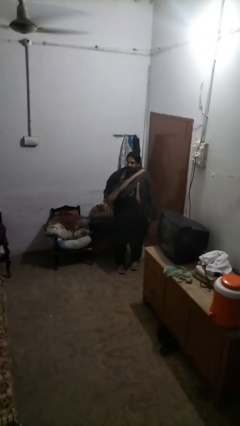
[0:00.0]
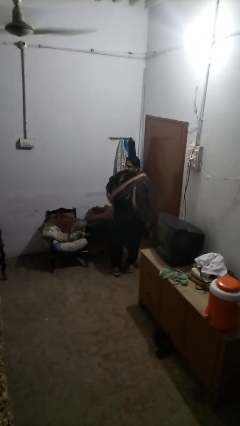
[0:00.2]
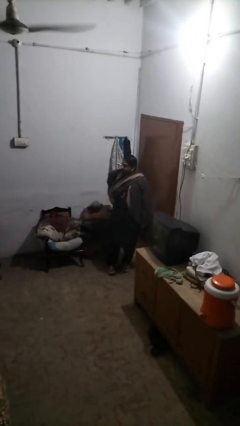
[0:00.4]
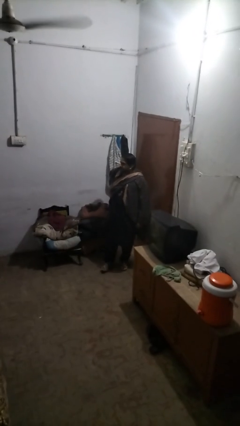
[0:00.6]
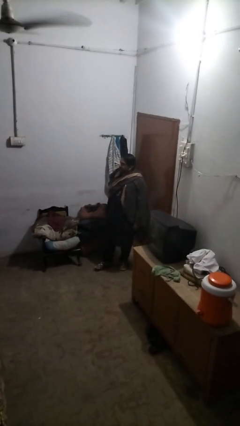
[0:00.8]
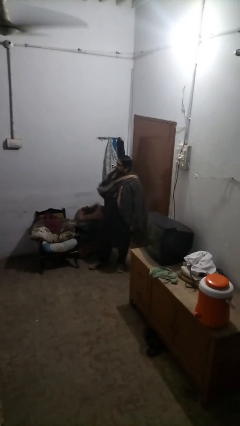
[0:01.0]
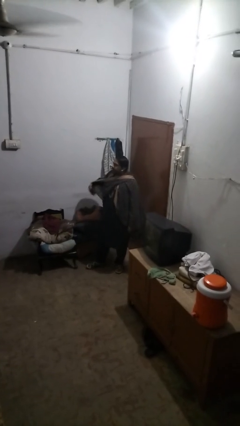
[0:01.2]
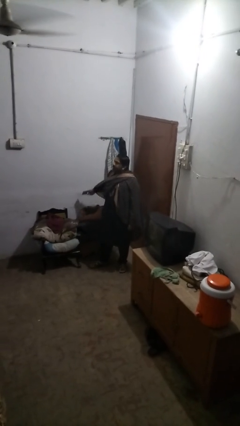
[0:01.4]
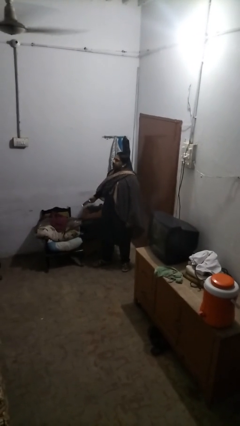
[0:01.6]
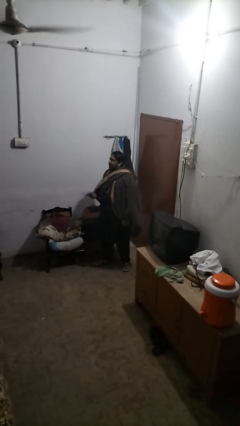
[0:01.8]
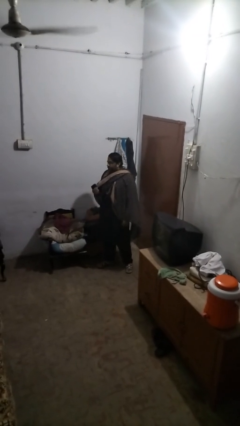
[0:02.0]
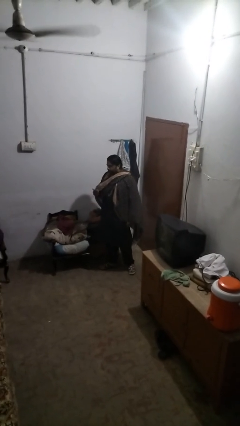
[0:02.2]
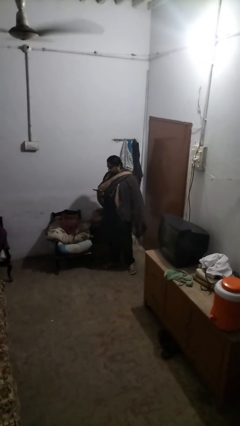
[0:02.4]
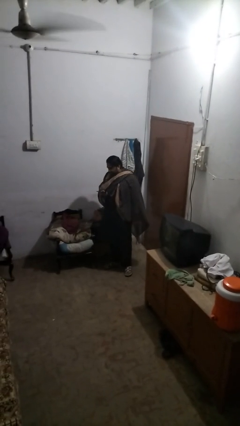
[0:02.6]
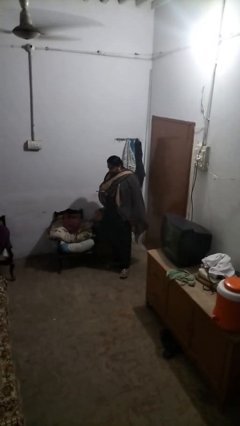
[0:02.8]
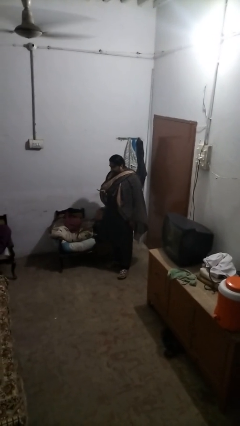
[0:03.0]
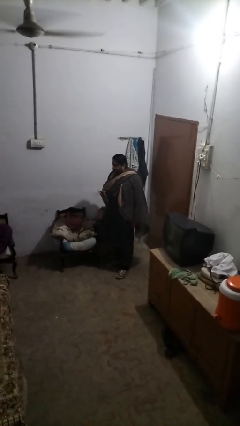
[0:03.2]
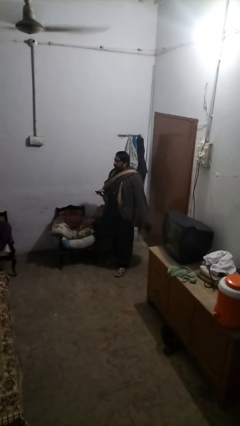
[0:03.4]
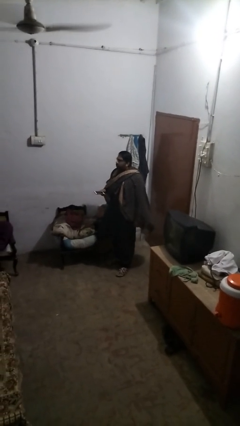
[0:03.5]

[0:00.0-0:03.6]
person takes phone from pocket

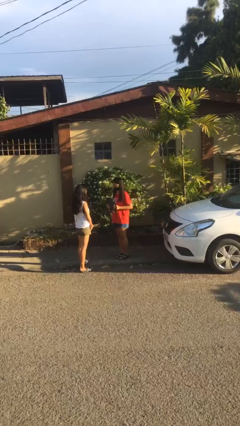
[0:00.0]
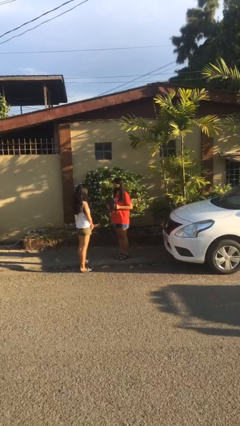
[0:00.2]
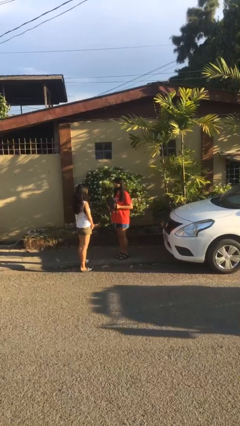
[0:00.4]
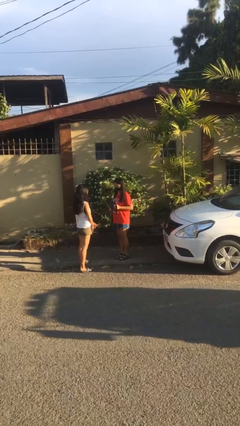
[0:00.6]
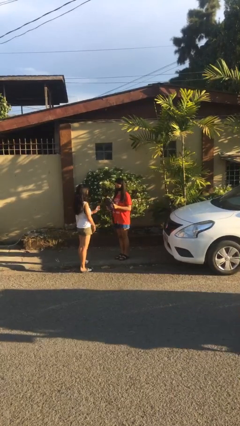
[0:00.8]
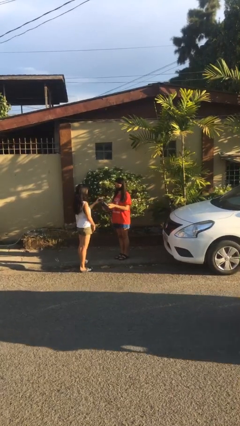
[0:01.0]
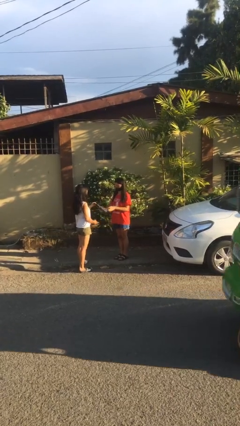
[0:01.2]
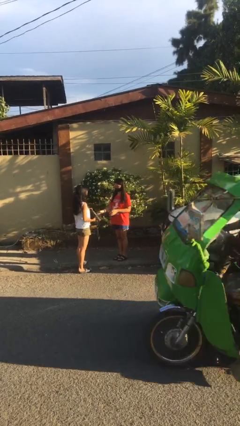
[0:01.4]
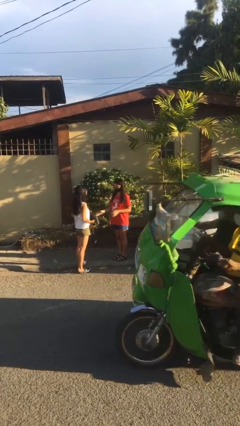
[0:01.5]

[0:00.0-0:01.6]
person transfers object to person

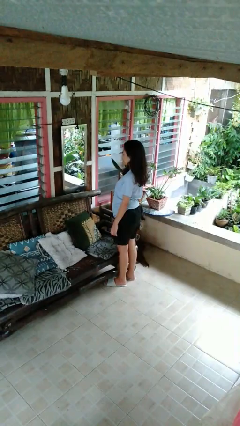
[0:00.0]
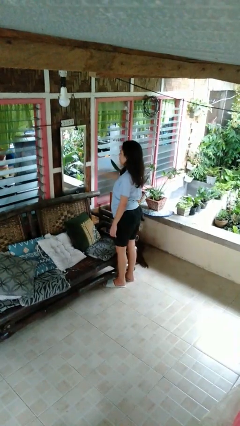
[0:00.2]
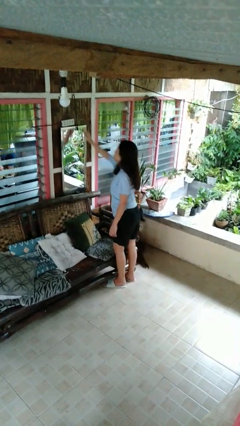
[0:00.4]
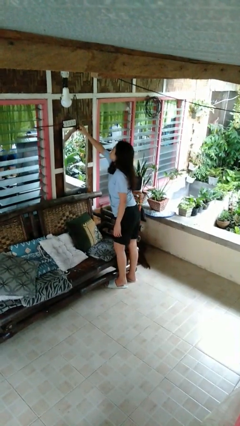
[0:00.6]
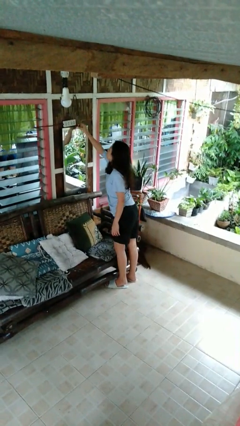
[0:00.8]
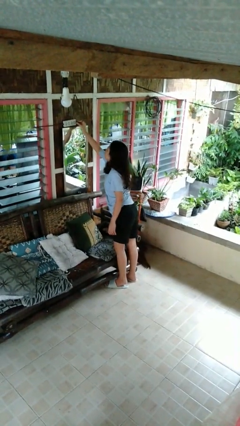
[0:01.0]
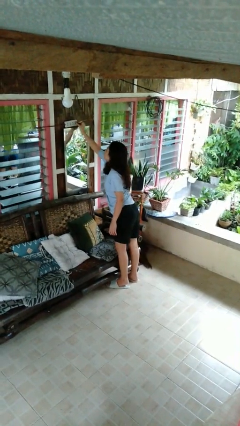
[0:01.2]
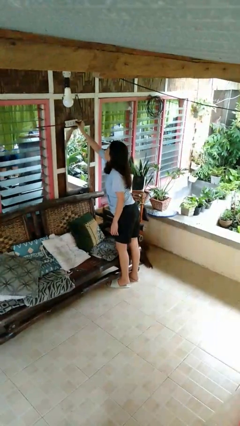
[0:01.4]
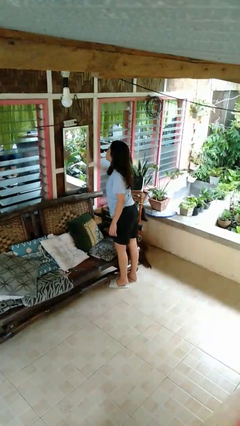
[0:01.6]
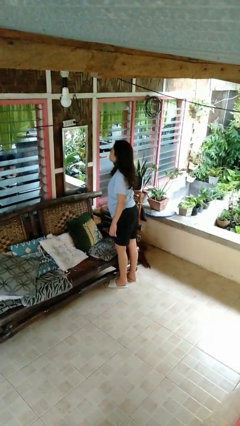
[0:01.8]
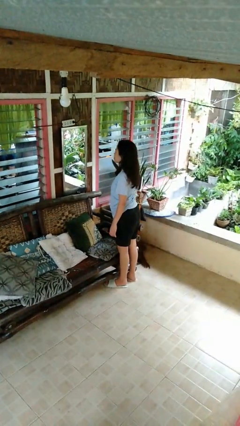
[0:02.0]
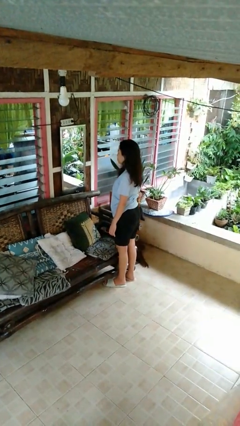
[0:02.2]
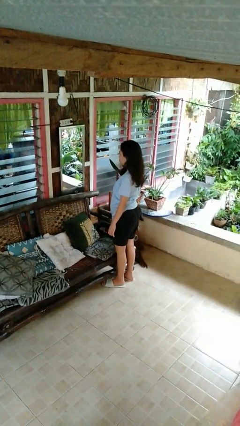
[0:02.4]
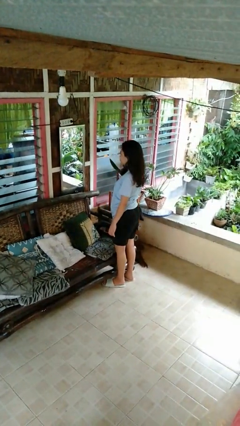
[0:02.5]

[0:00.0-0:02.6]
person plugs into electrical socket

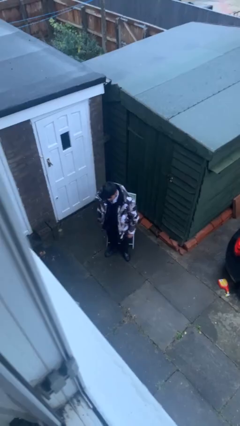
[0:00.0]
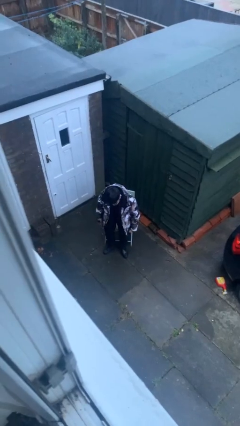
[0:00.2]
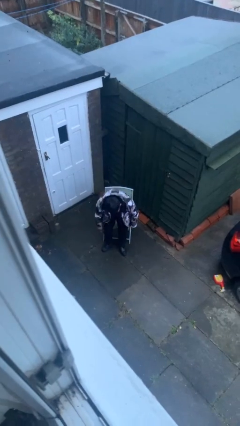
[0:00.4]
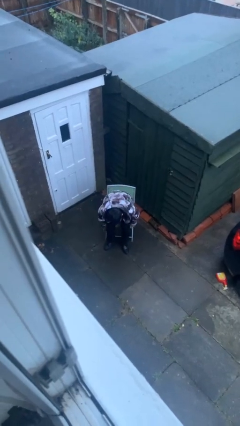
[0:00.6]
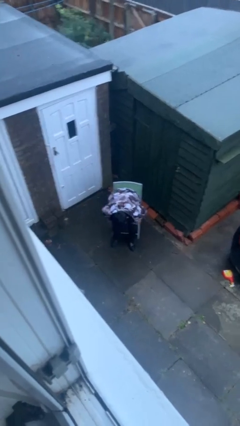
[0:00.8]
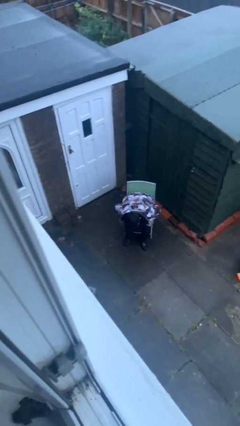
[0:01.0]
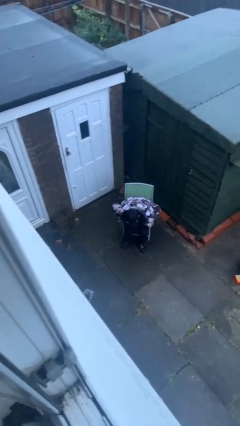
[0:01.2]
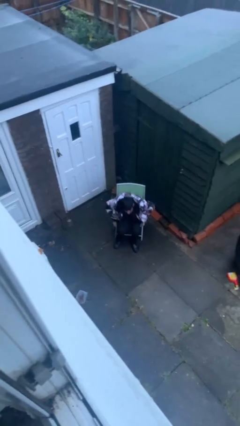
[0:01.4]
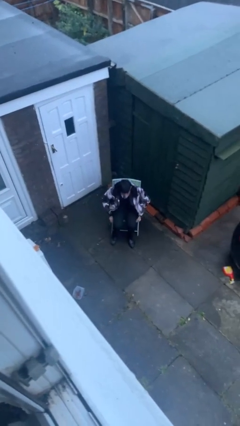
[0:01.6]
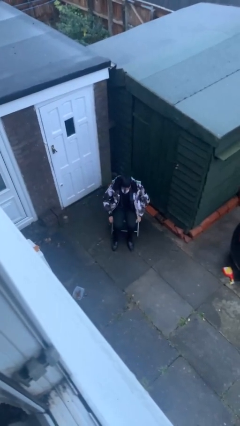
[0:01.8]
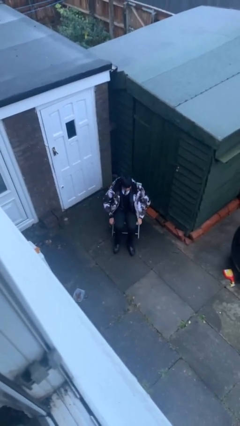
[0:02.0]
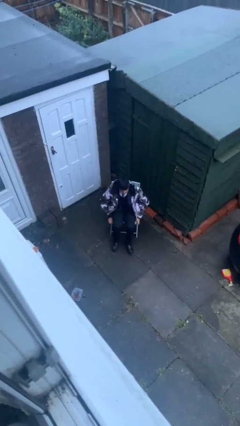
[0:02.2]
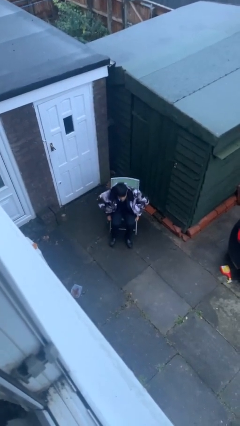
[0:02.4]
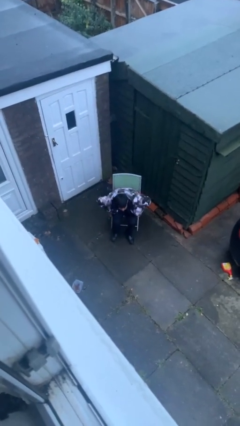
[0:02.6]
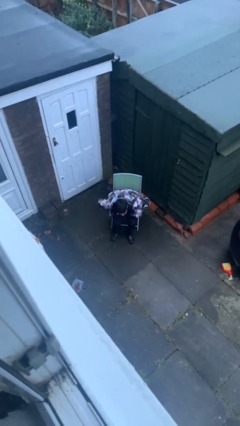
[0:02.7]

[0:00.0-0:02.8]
person sits down

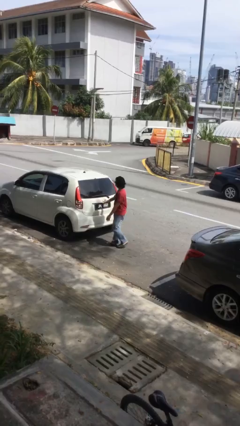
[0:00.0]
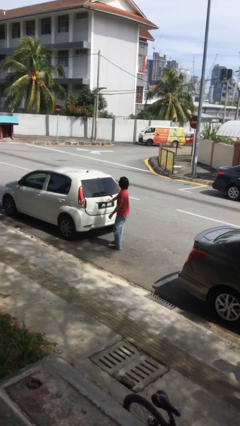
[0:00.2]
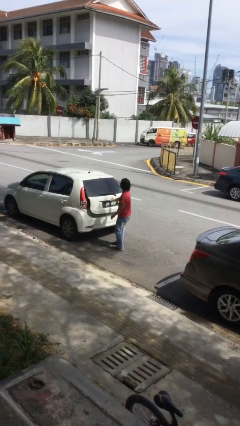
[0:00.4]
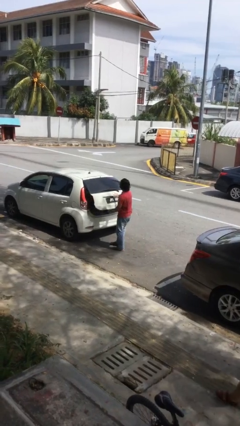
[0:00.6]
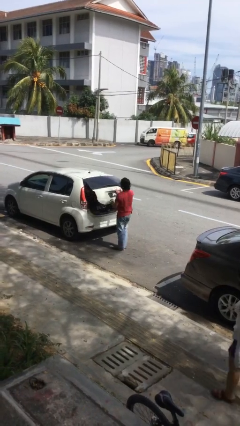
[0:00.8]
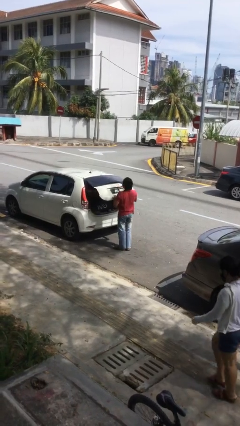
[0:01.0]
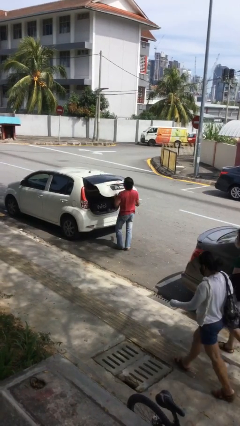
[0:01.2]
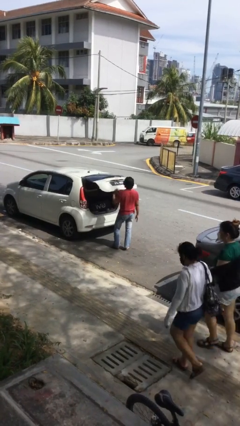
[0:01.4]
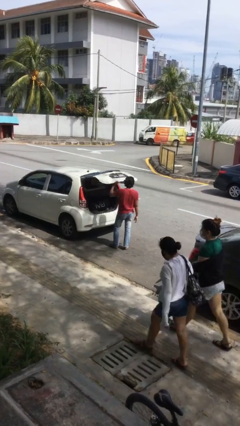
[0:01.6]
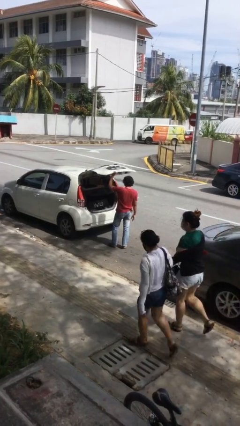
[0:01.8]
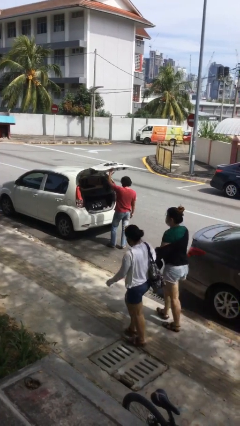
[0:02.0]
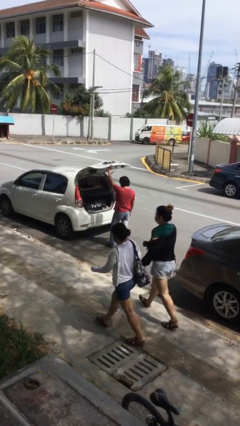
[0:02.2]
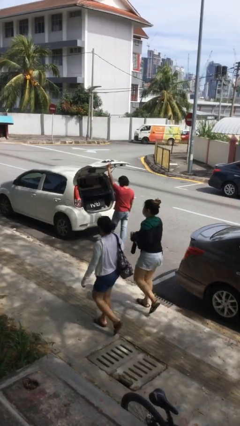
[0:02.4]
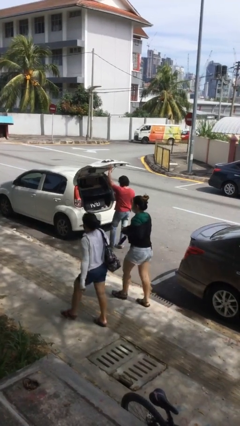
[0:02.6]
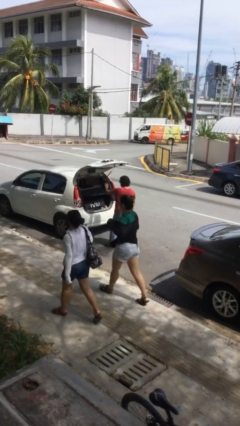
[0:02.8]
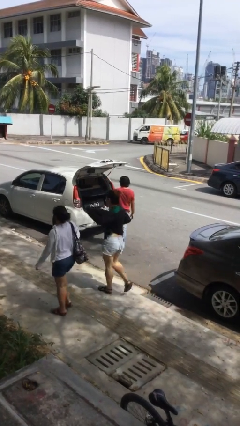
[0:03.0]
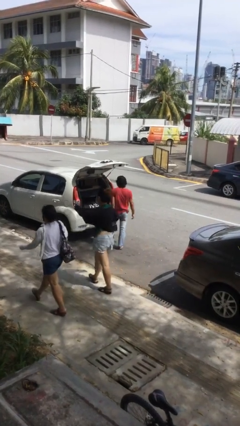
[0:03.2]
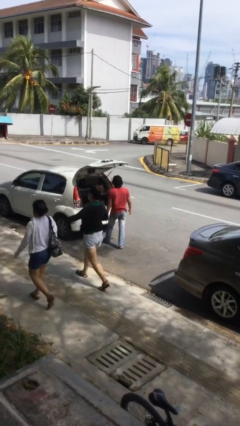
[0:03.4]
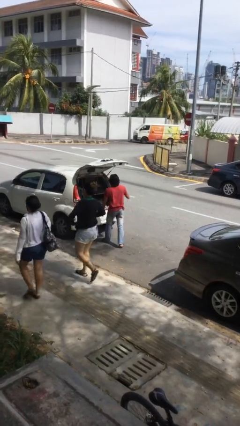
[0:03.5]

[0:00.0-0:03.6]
person opens car trunk

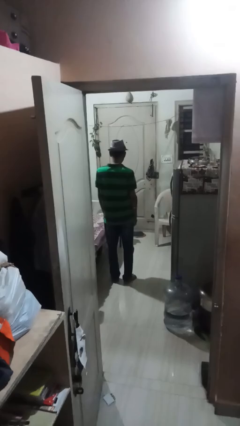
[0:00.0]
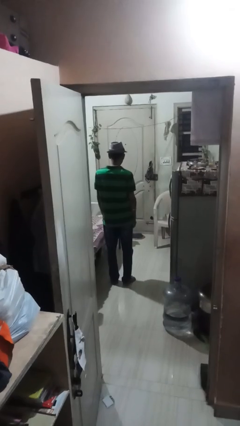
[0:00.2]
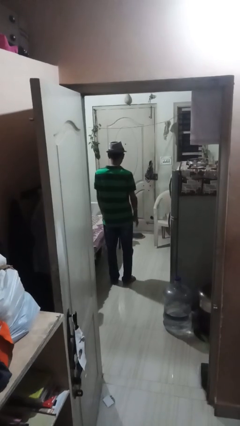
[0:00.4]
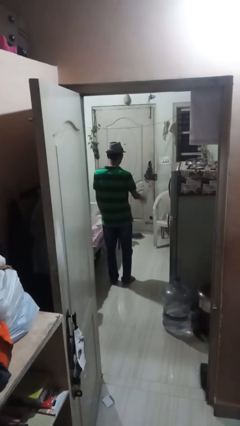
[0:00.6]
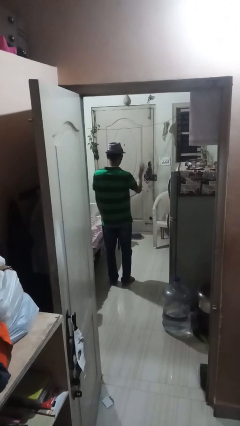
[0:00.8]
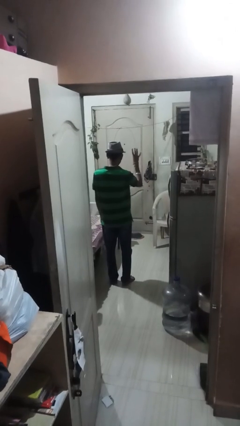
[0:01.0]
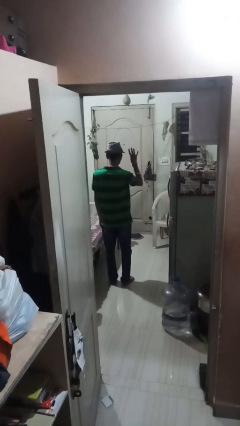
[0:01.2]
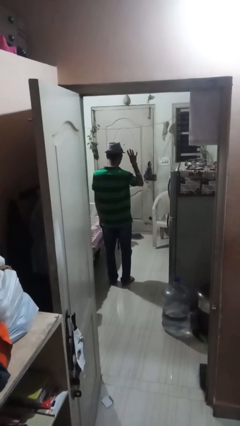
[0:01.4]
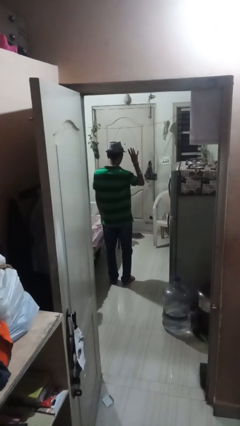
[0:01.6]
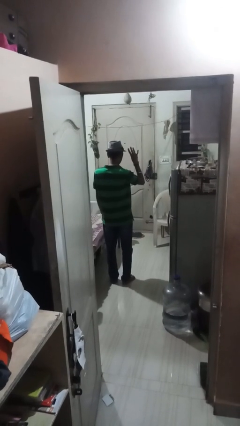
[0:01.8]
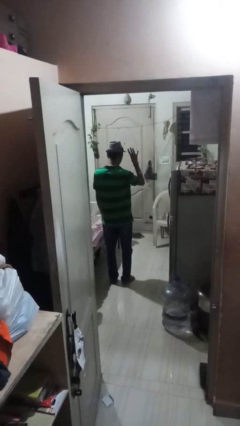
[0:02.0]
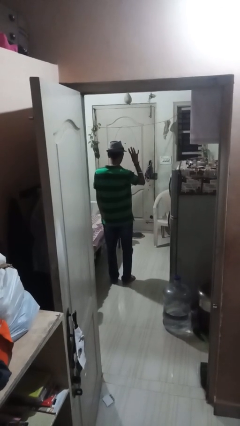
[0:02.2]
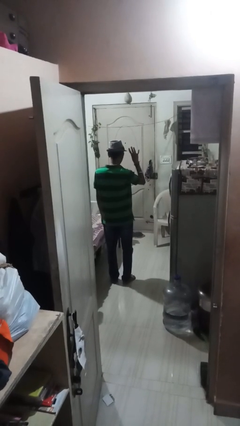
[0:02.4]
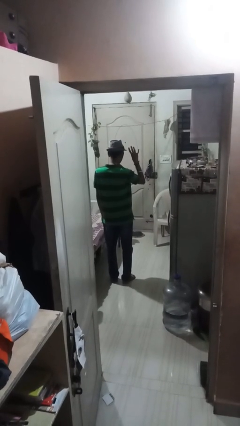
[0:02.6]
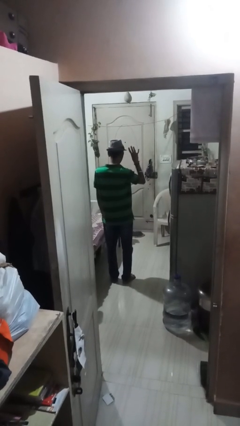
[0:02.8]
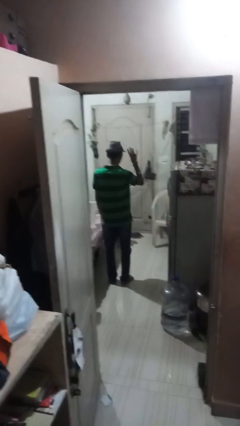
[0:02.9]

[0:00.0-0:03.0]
person gestures number four
